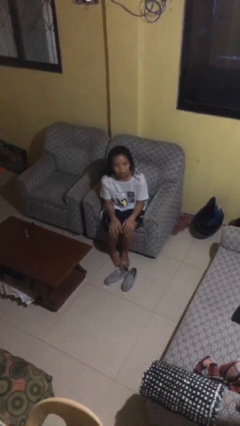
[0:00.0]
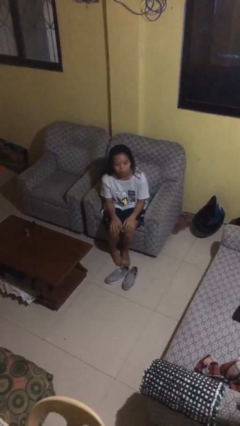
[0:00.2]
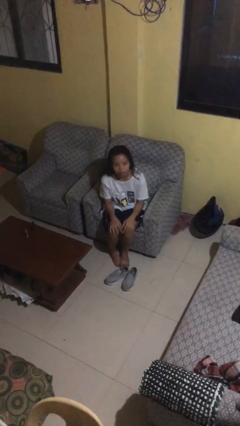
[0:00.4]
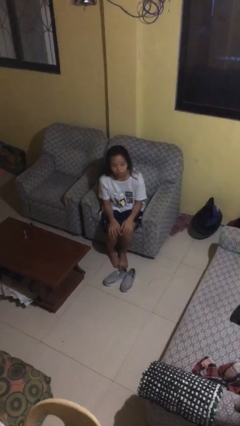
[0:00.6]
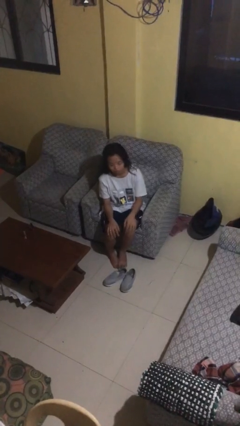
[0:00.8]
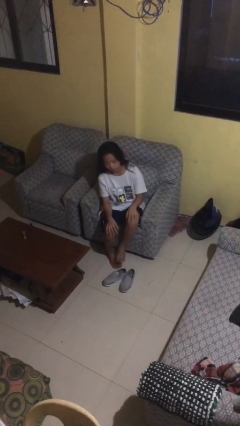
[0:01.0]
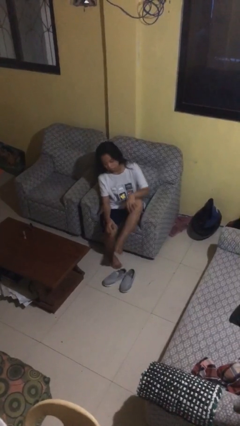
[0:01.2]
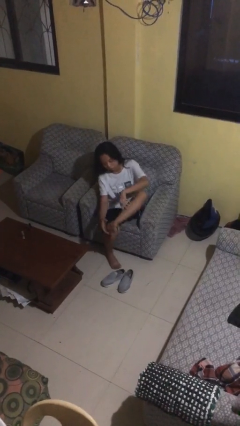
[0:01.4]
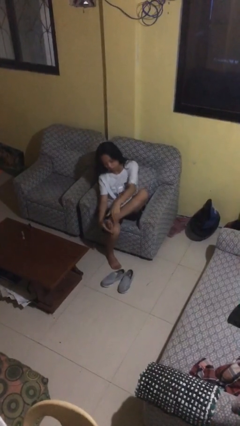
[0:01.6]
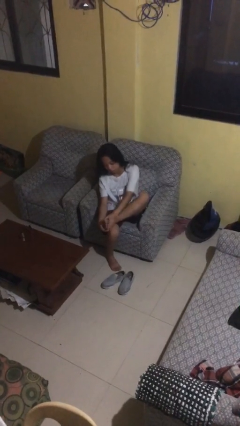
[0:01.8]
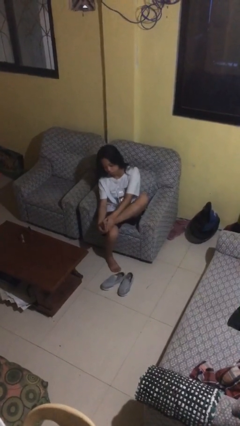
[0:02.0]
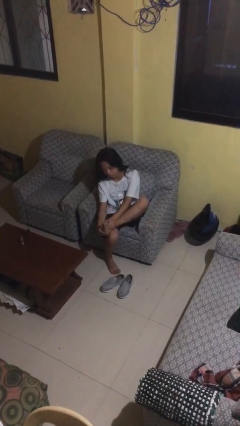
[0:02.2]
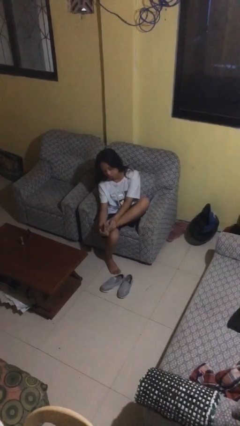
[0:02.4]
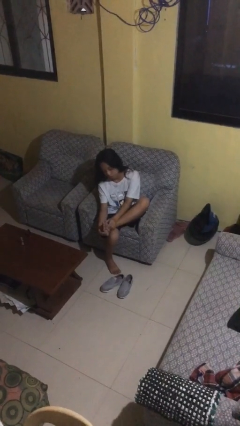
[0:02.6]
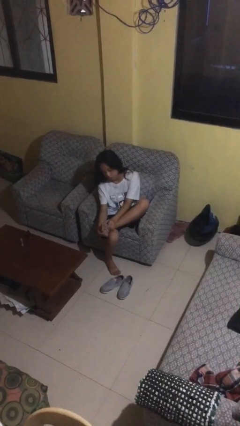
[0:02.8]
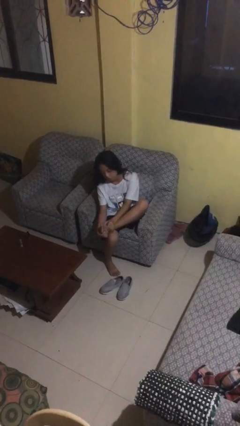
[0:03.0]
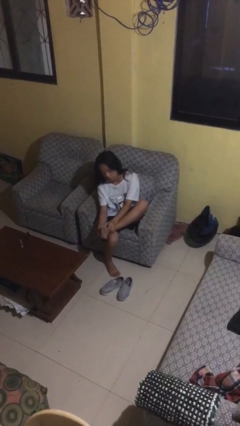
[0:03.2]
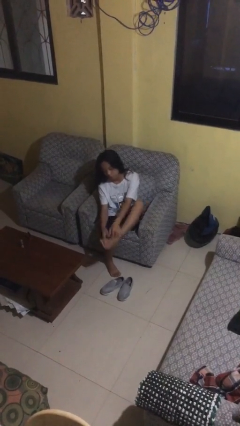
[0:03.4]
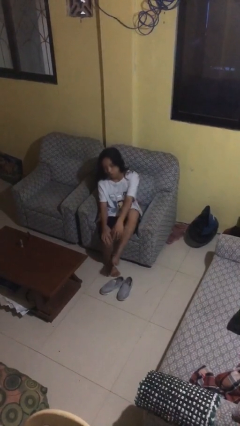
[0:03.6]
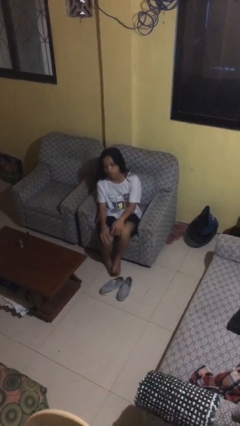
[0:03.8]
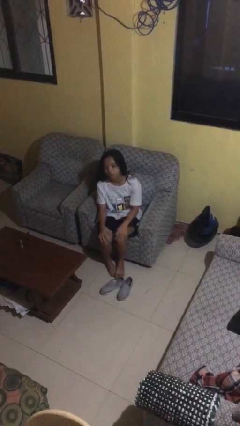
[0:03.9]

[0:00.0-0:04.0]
person rubs foot

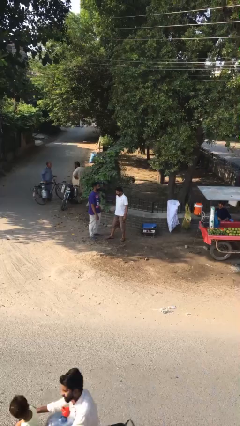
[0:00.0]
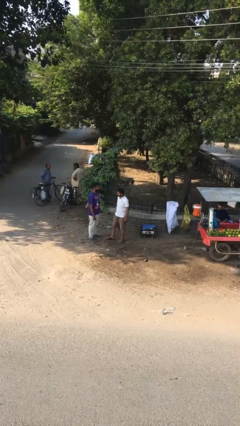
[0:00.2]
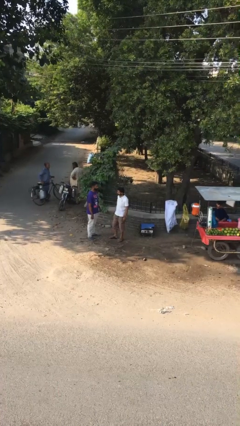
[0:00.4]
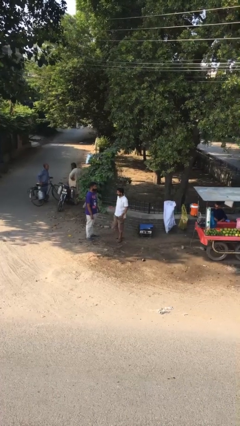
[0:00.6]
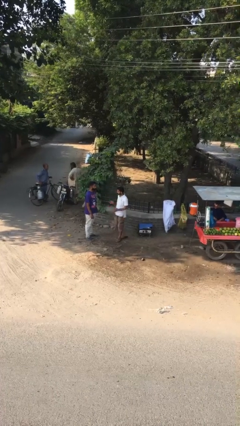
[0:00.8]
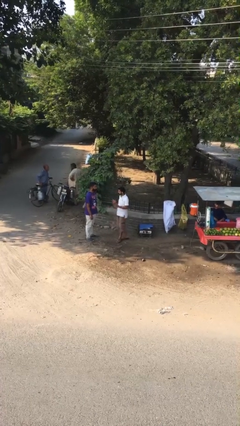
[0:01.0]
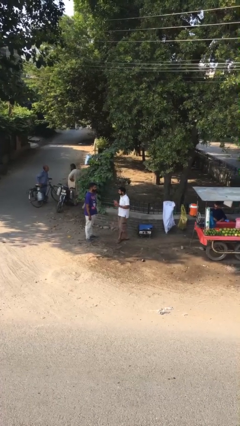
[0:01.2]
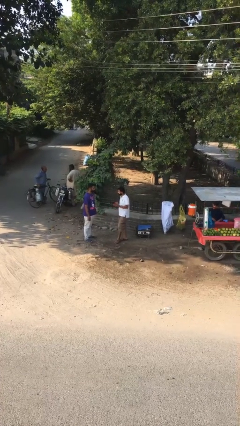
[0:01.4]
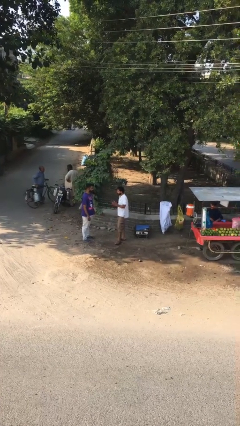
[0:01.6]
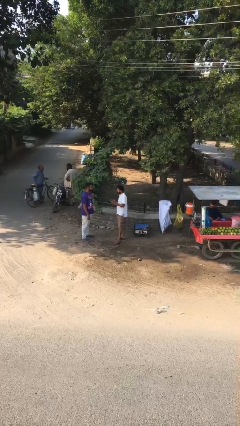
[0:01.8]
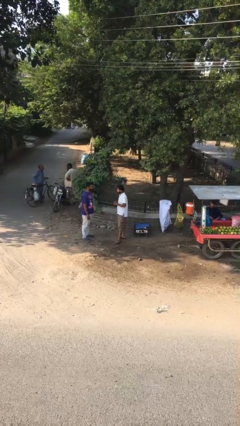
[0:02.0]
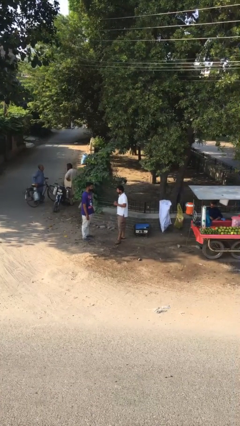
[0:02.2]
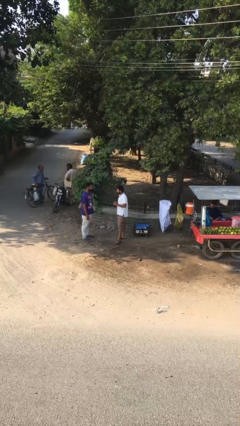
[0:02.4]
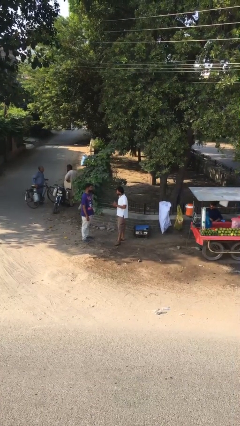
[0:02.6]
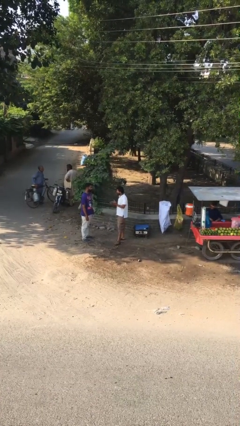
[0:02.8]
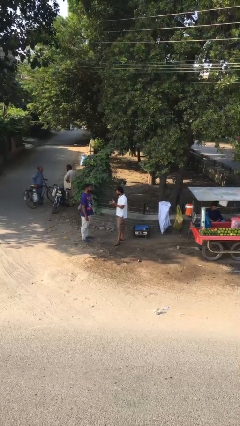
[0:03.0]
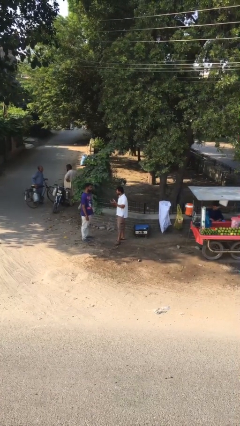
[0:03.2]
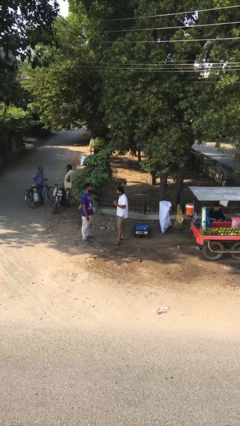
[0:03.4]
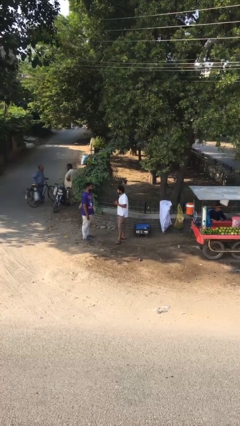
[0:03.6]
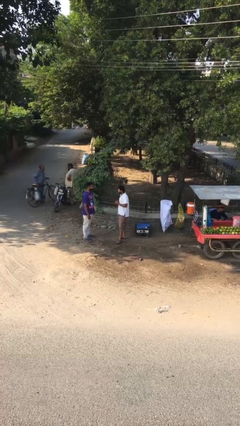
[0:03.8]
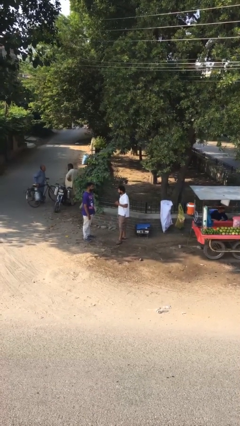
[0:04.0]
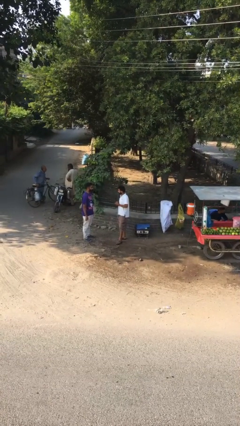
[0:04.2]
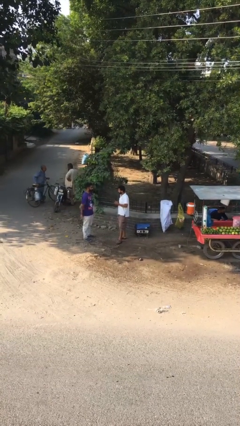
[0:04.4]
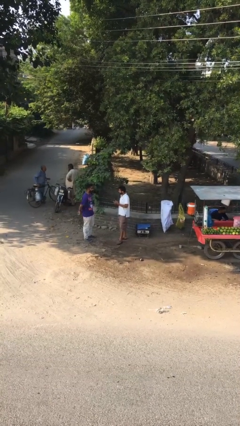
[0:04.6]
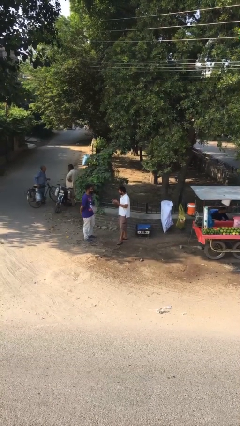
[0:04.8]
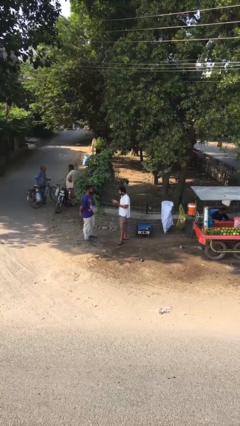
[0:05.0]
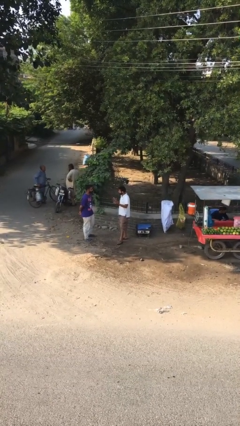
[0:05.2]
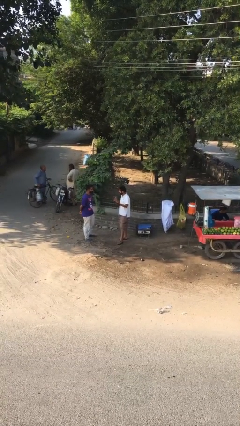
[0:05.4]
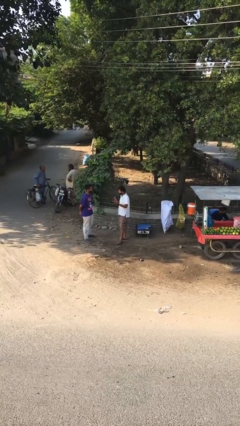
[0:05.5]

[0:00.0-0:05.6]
person talks to person

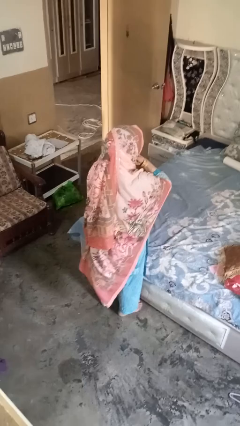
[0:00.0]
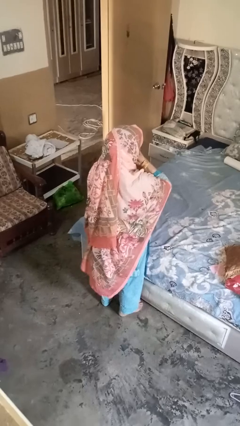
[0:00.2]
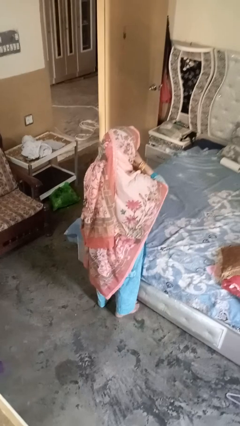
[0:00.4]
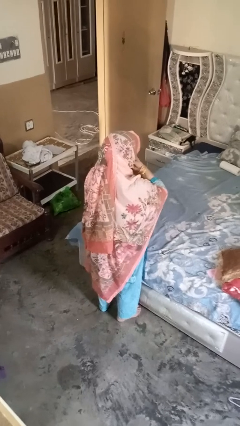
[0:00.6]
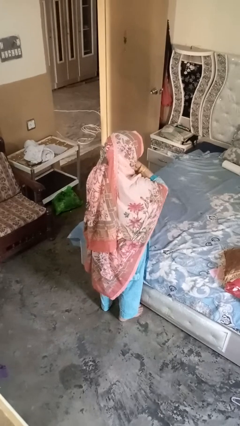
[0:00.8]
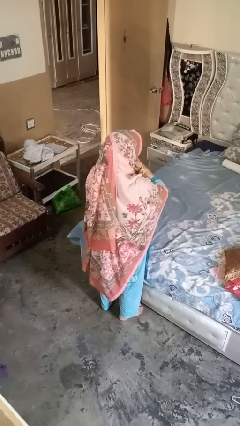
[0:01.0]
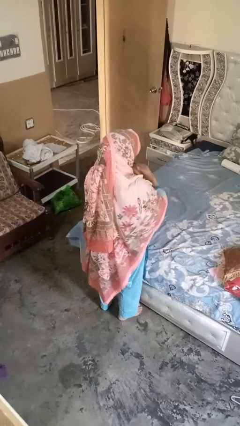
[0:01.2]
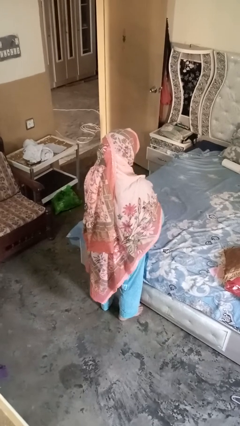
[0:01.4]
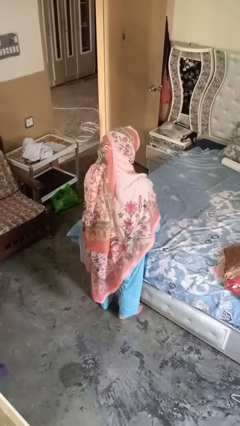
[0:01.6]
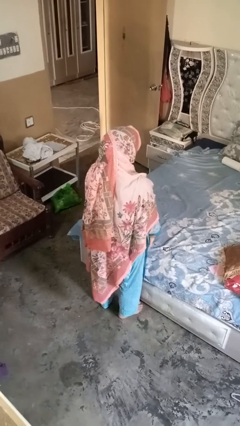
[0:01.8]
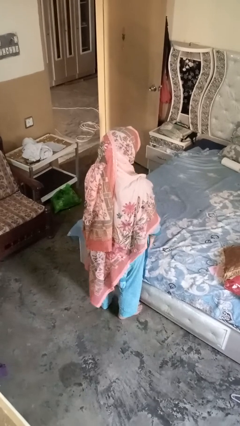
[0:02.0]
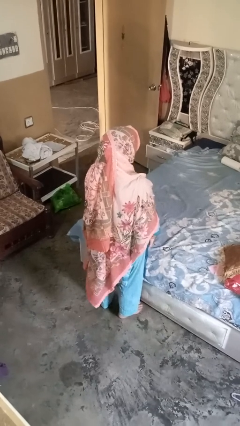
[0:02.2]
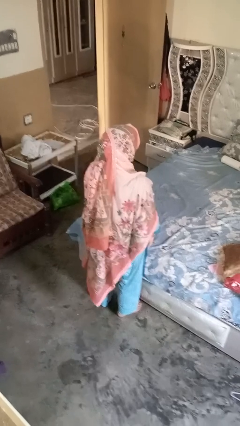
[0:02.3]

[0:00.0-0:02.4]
person strokes chin

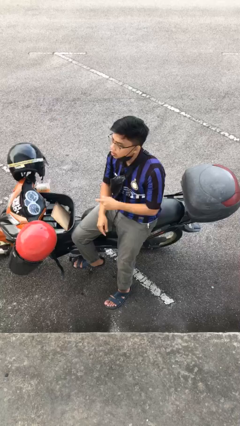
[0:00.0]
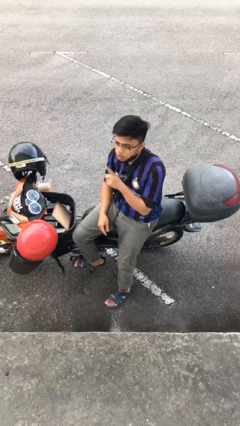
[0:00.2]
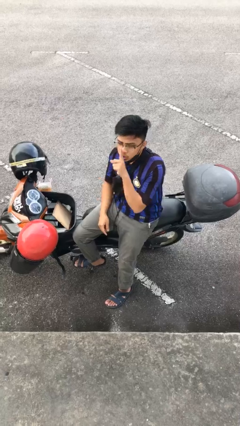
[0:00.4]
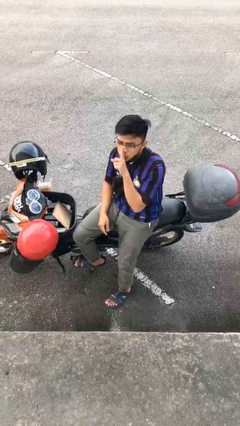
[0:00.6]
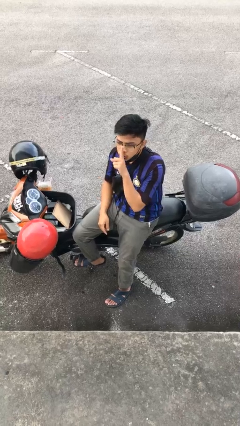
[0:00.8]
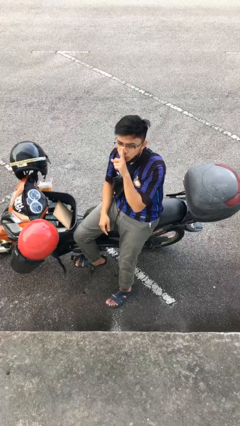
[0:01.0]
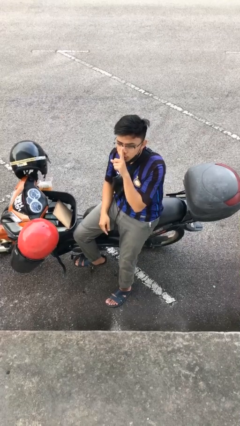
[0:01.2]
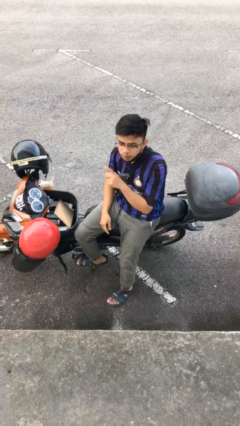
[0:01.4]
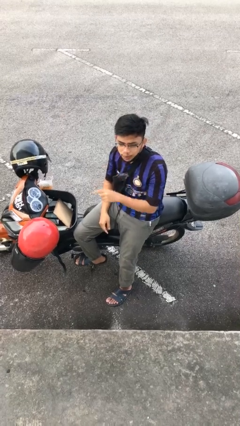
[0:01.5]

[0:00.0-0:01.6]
person gestures be quiet

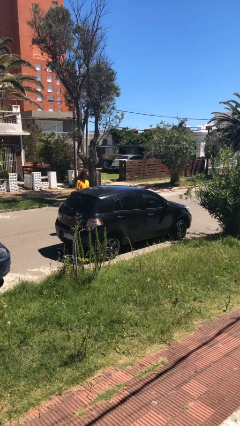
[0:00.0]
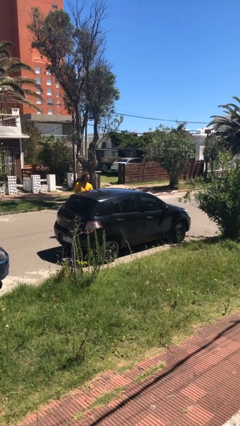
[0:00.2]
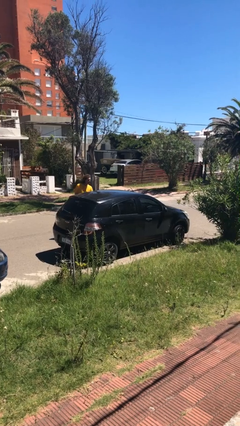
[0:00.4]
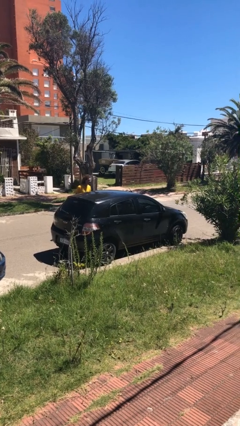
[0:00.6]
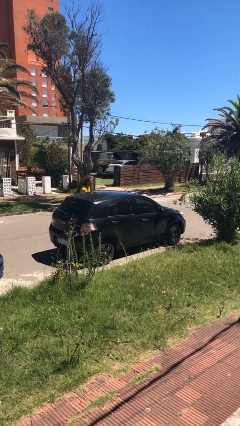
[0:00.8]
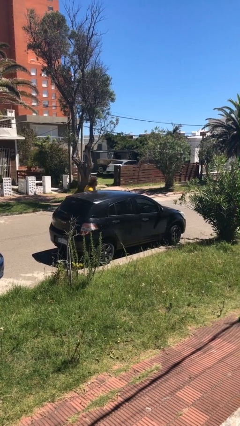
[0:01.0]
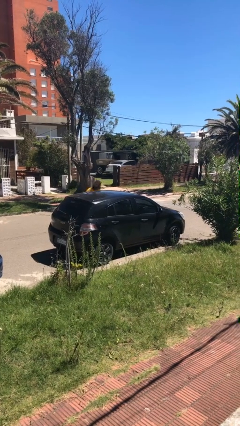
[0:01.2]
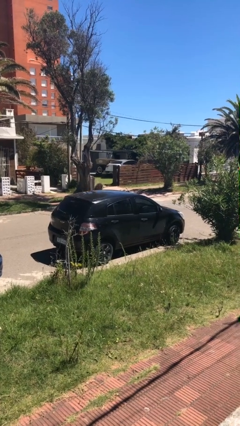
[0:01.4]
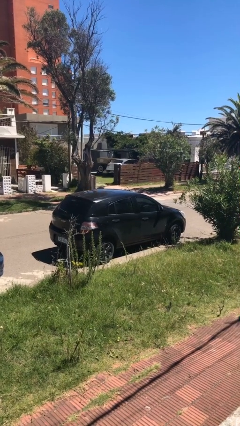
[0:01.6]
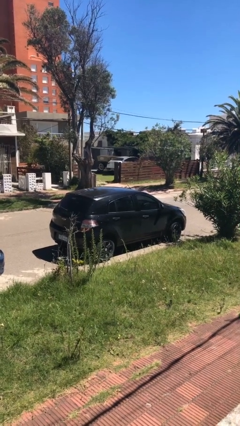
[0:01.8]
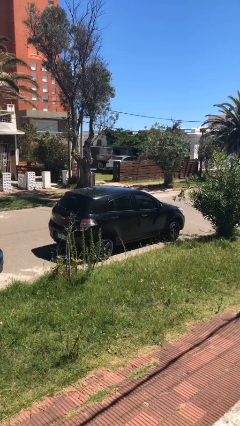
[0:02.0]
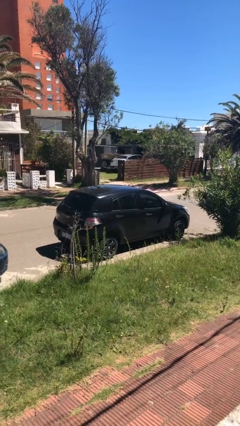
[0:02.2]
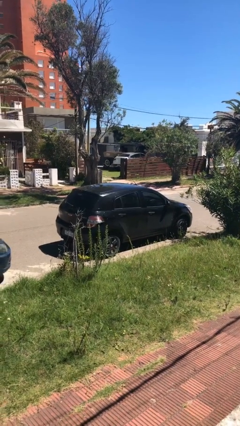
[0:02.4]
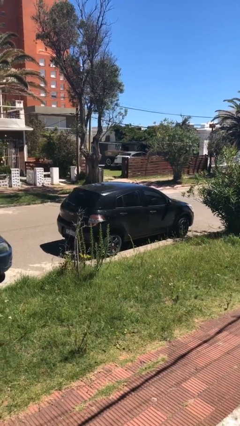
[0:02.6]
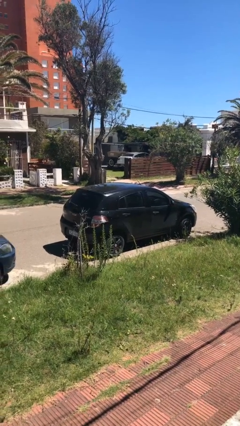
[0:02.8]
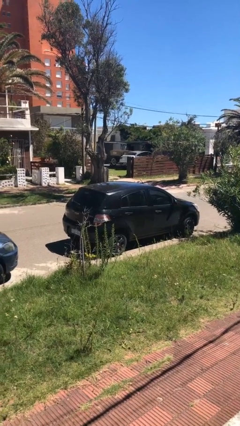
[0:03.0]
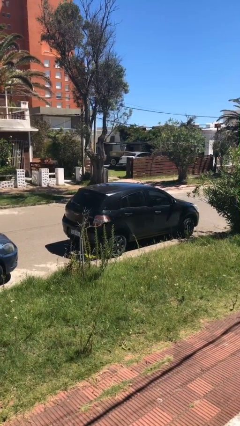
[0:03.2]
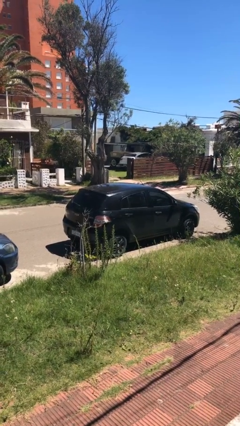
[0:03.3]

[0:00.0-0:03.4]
car picks up person

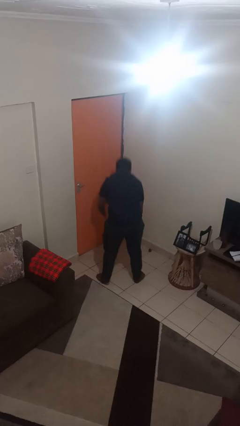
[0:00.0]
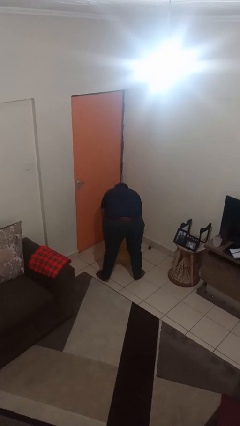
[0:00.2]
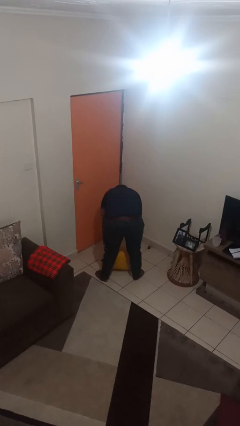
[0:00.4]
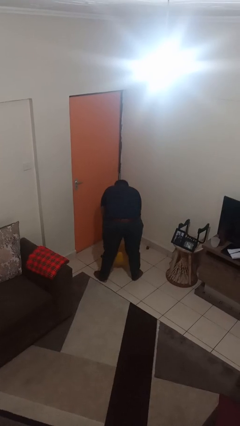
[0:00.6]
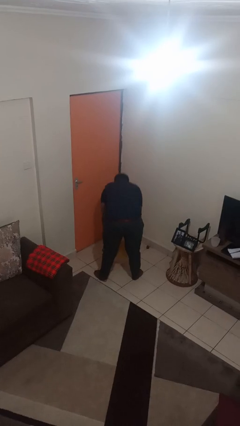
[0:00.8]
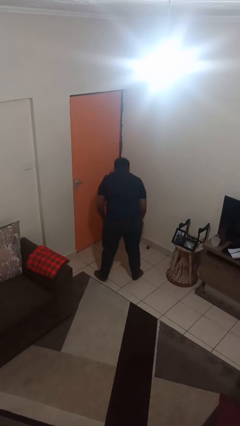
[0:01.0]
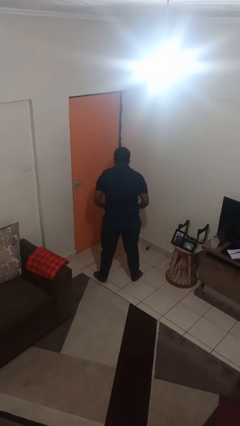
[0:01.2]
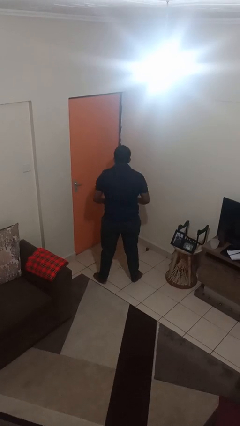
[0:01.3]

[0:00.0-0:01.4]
person catches dropped object
